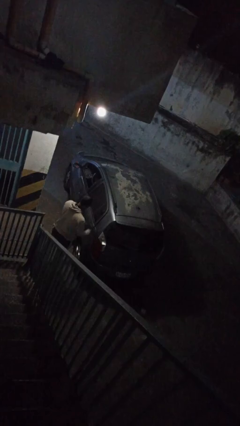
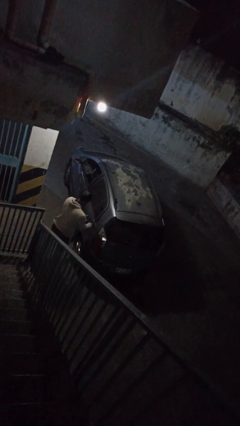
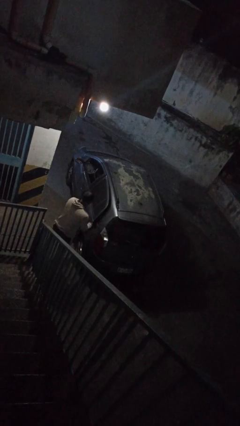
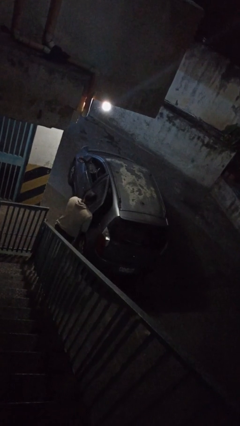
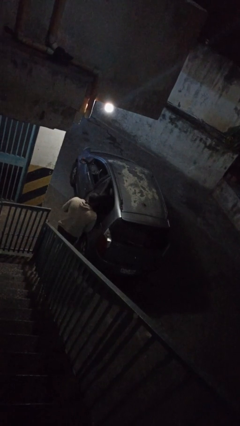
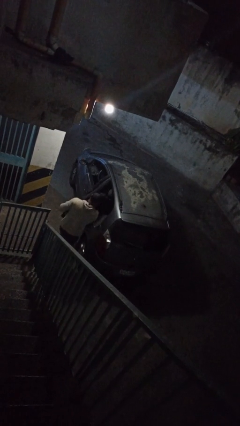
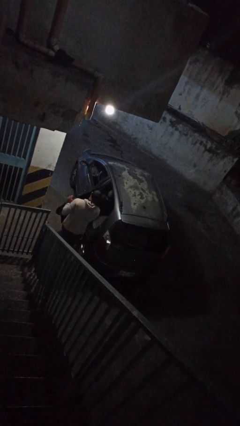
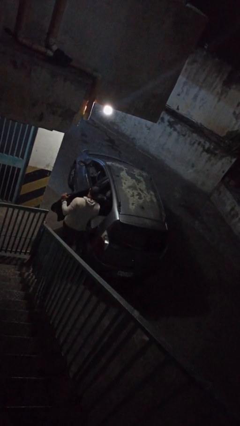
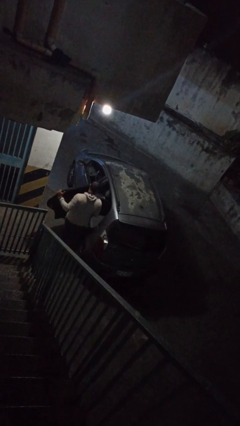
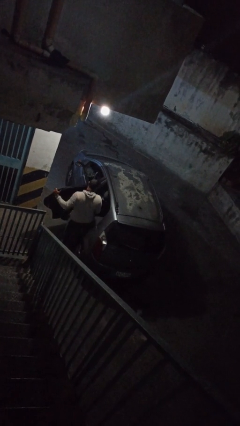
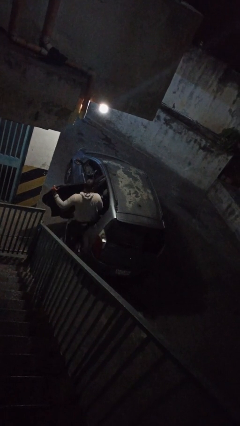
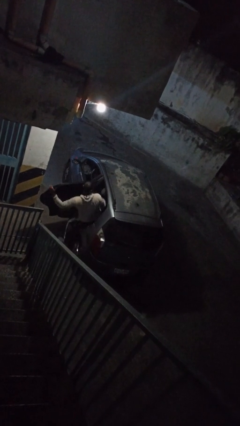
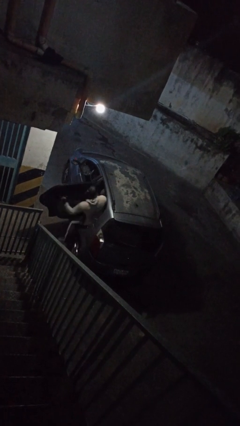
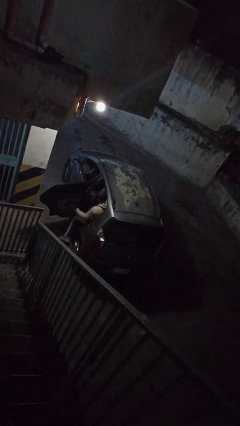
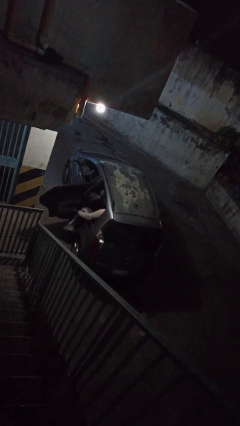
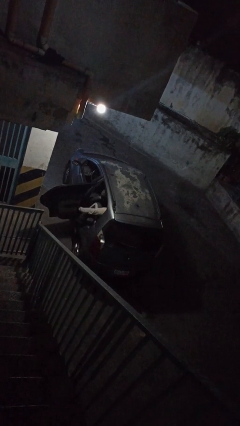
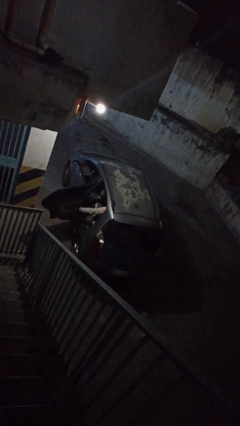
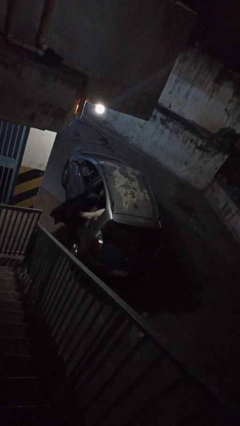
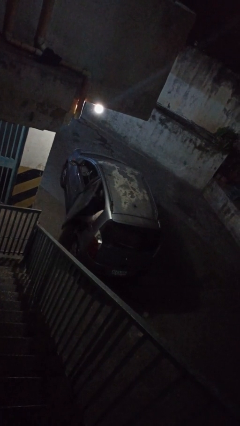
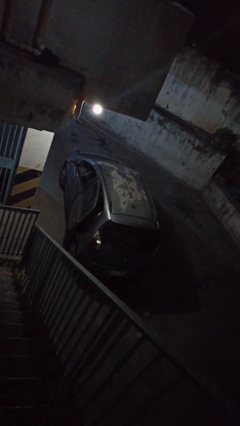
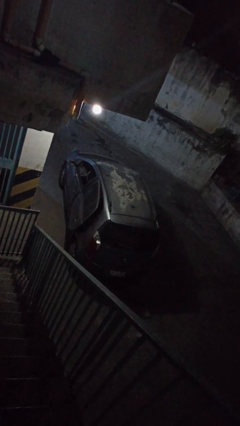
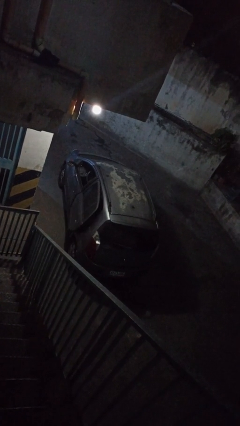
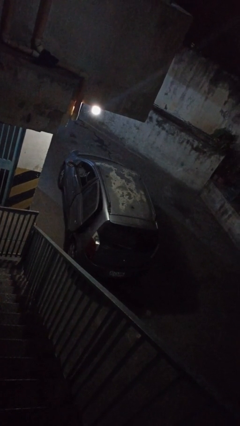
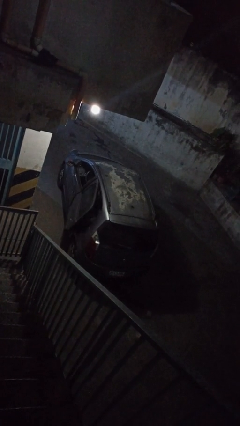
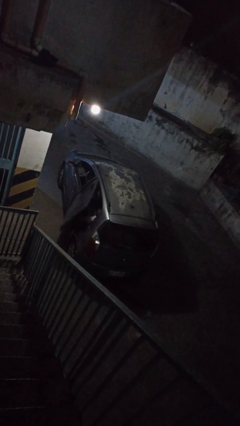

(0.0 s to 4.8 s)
car picks up person

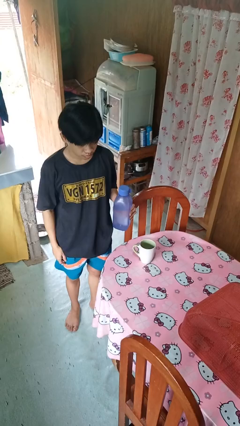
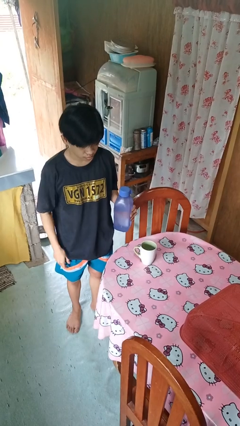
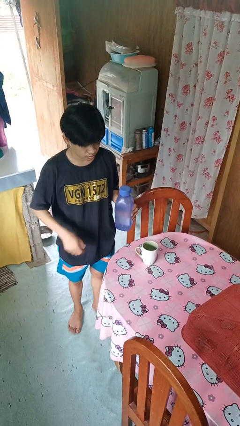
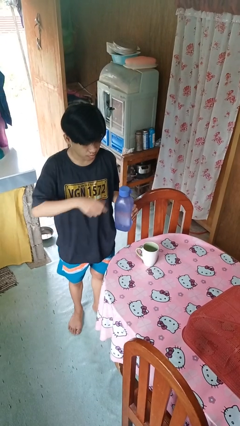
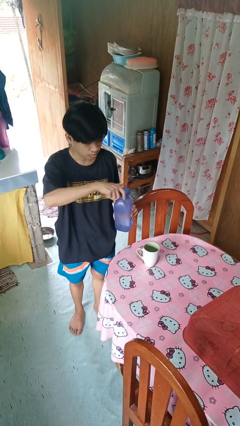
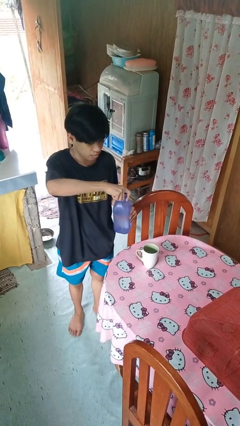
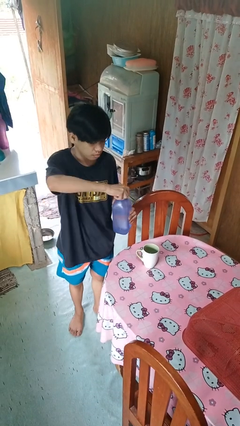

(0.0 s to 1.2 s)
person unscrews lid from bottle

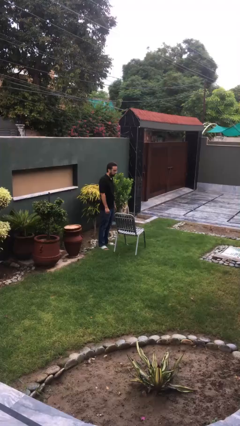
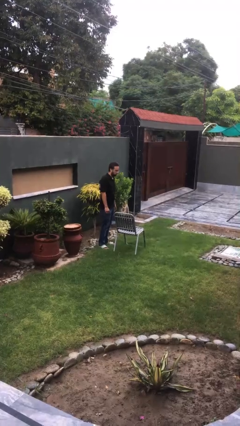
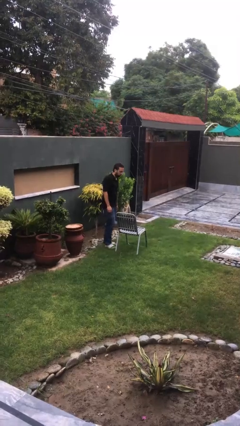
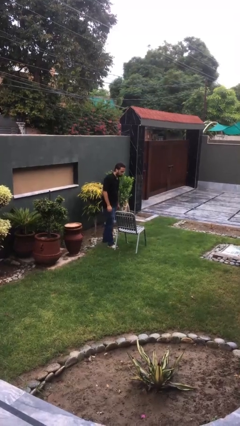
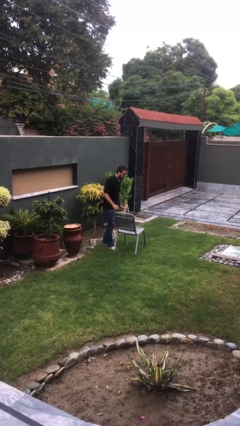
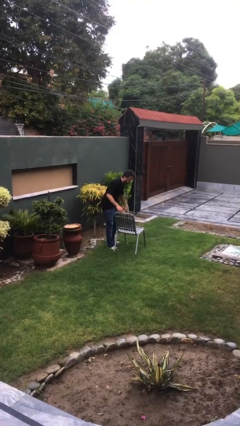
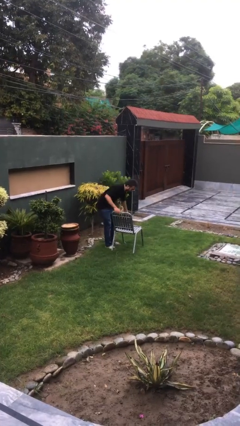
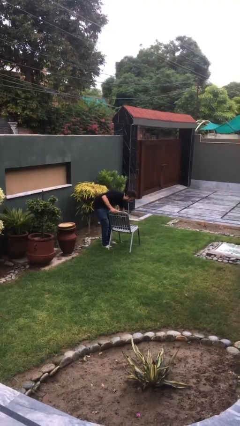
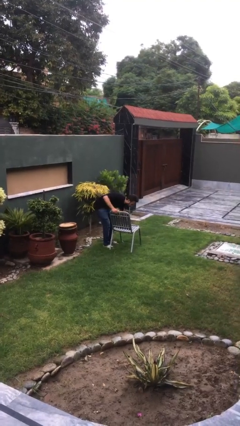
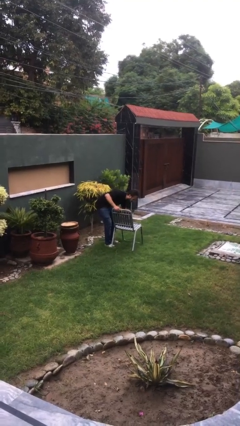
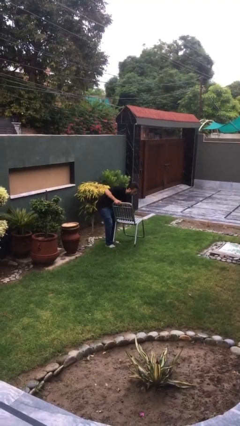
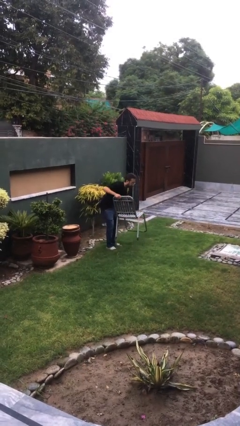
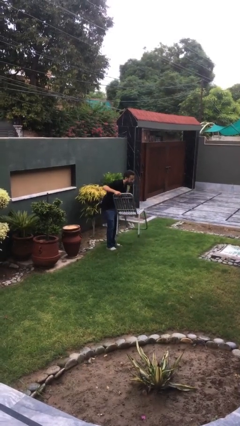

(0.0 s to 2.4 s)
person picks up object from floor

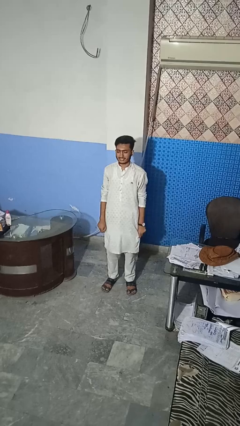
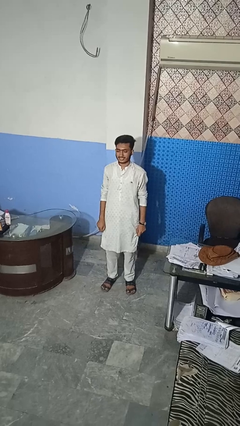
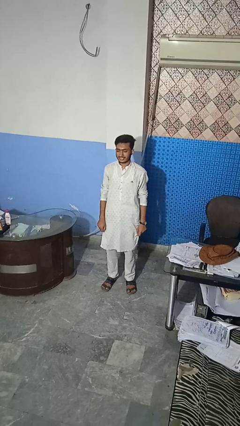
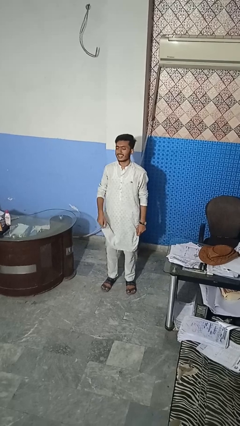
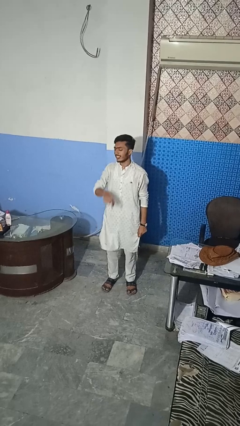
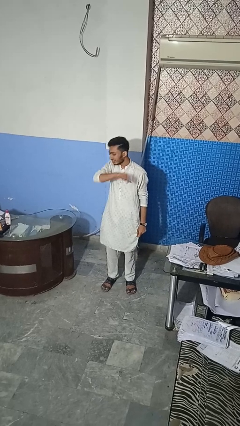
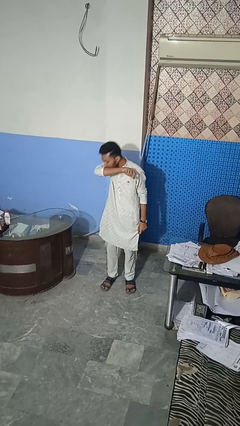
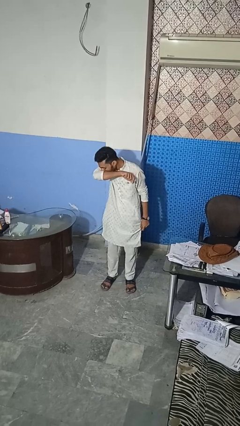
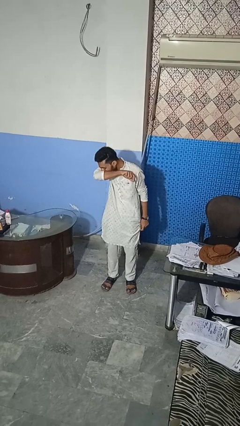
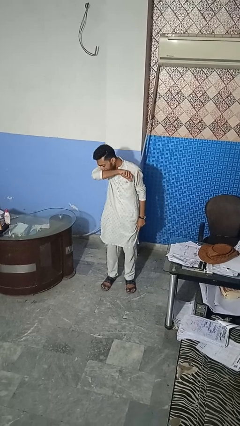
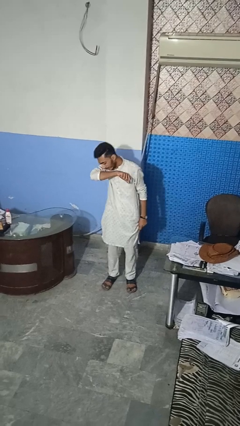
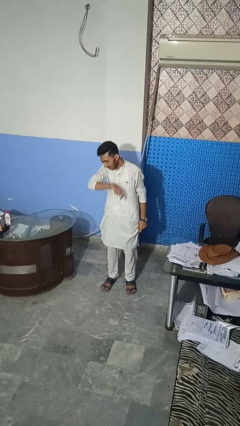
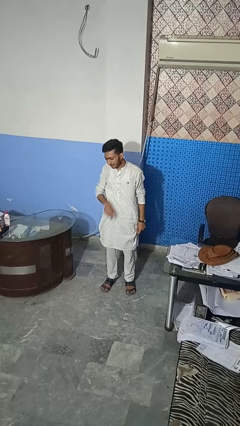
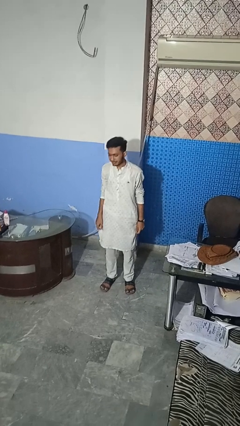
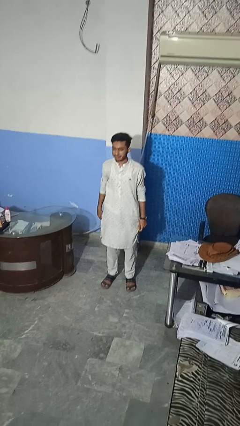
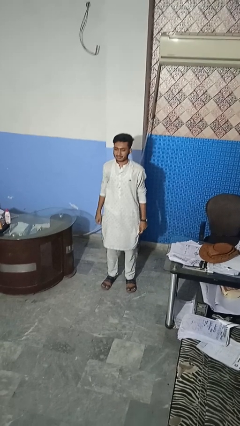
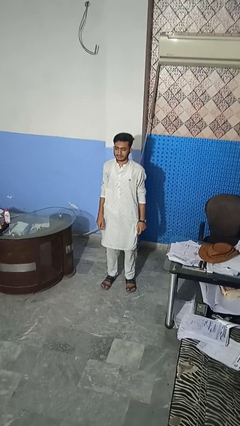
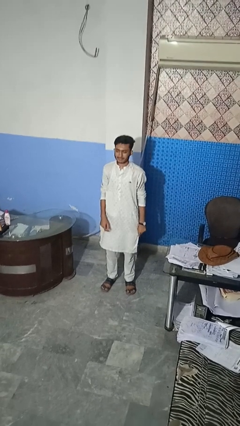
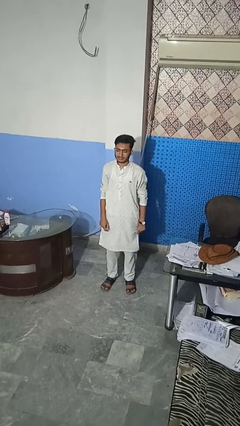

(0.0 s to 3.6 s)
person sneezes into arm

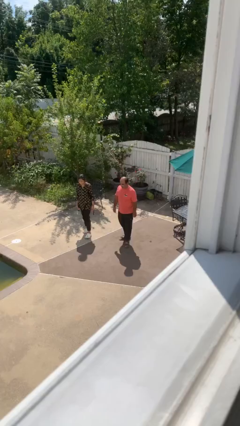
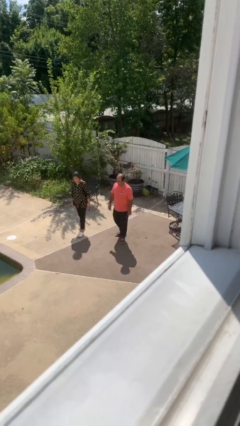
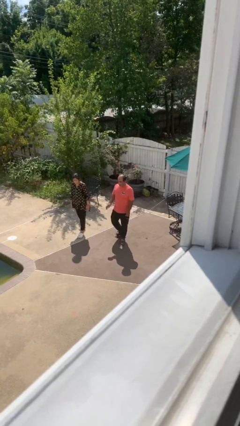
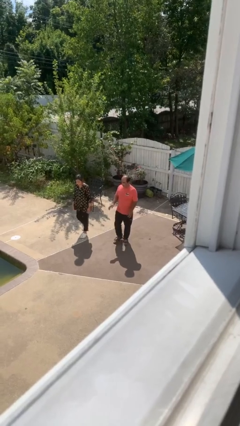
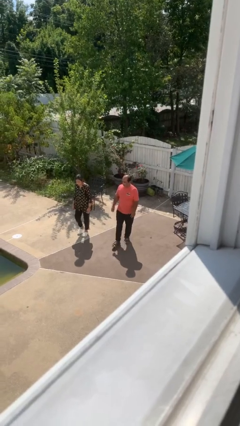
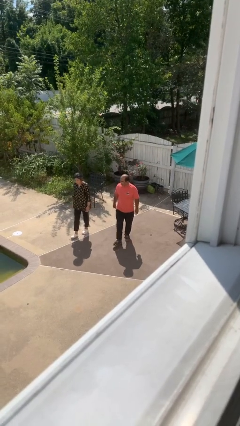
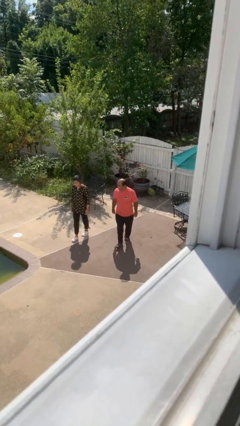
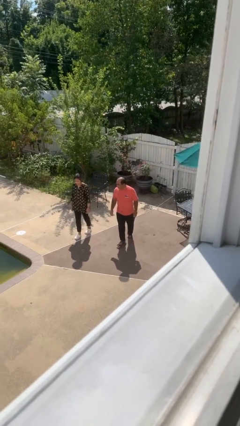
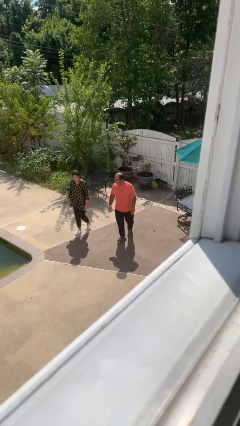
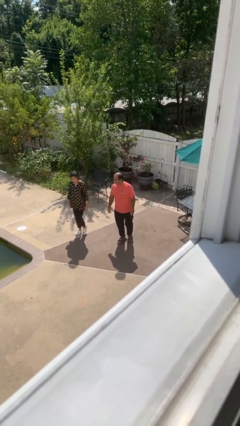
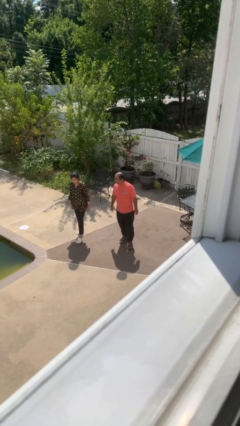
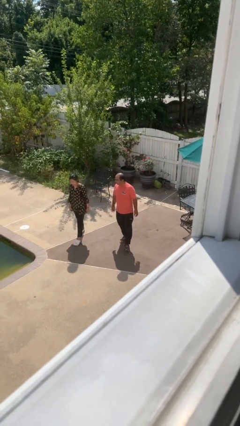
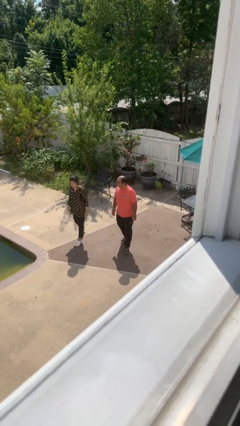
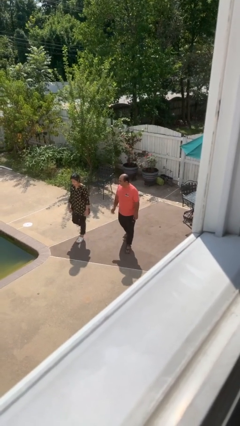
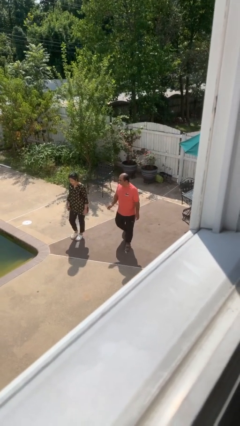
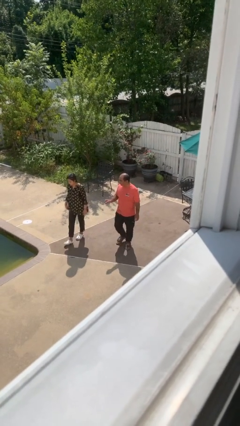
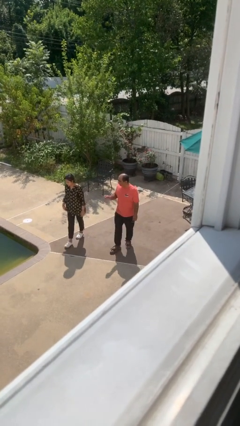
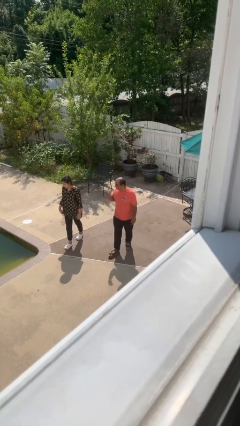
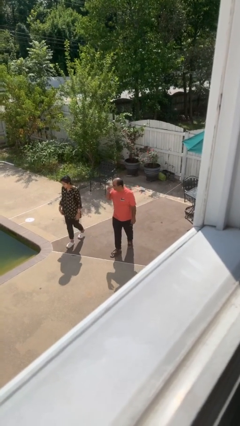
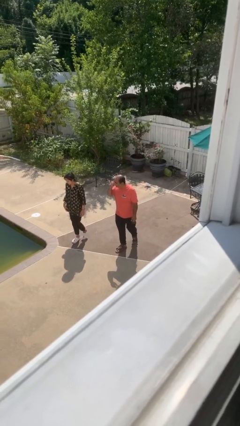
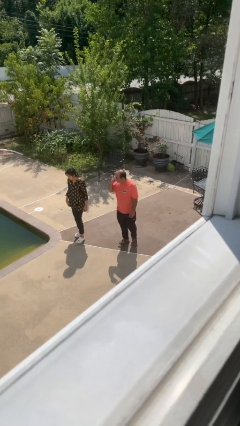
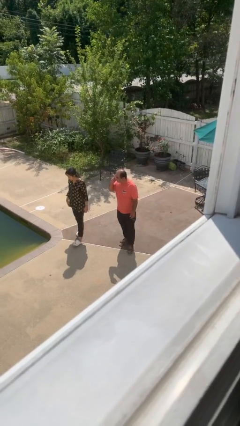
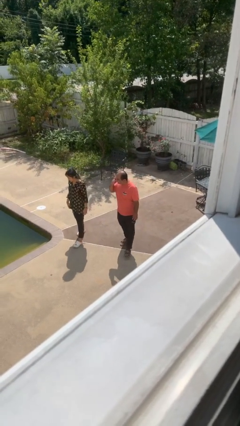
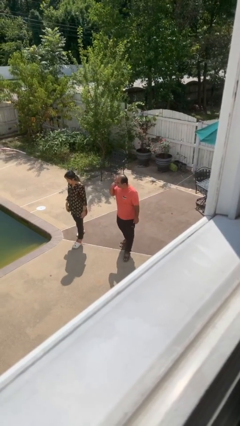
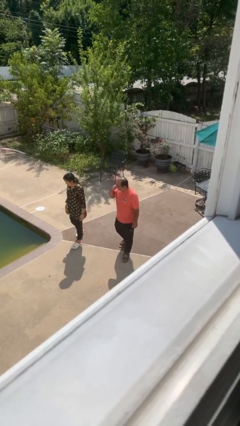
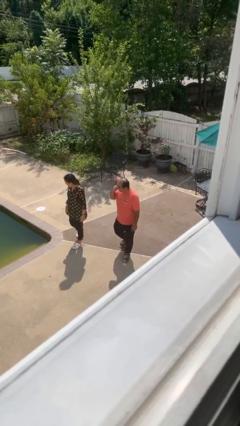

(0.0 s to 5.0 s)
person talks to person

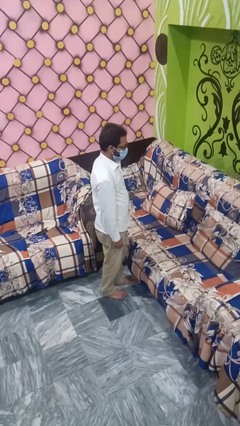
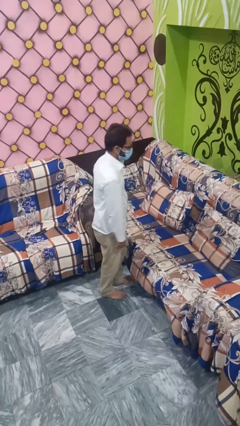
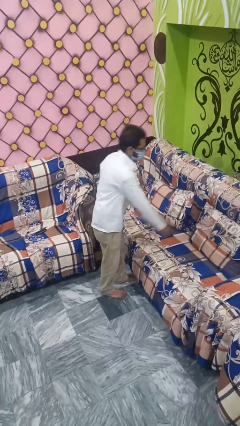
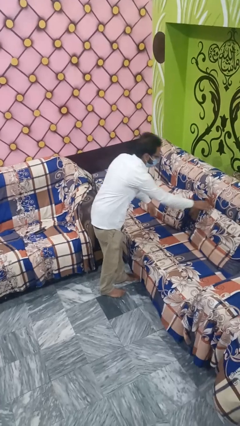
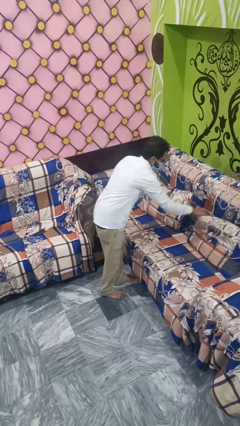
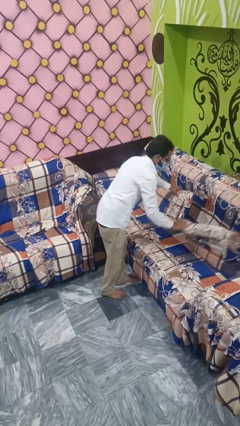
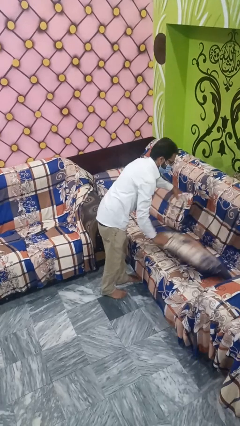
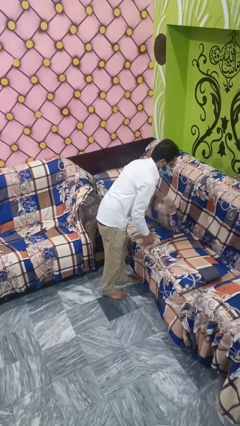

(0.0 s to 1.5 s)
person searches in couch
